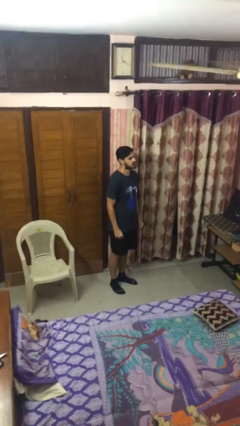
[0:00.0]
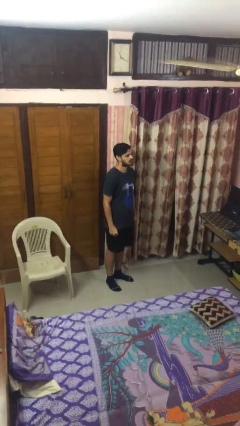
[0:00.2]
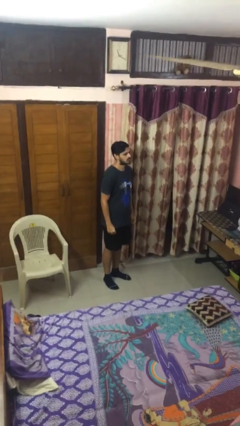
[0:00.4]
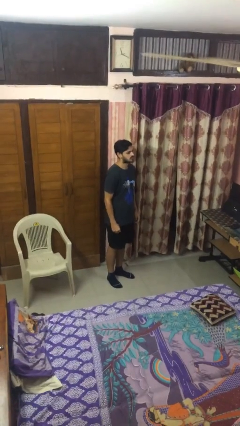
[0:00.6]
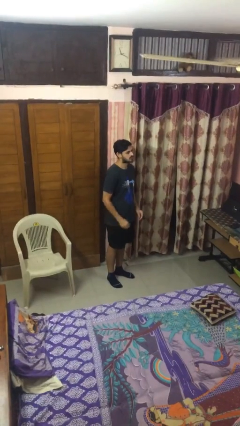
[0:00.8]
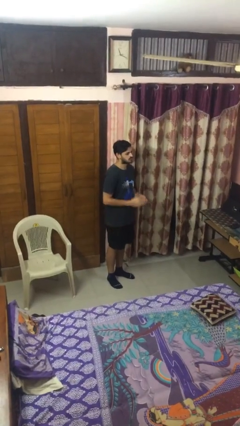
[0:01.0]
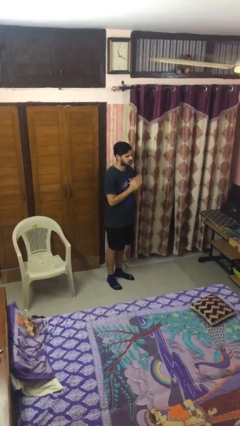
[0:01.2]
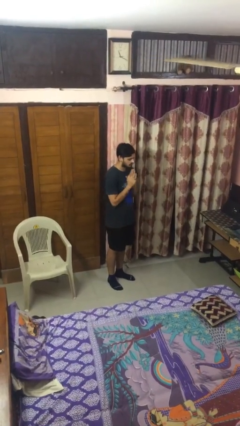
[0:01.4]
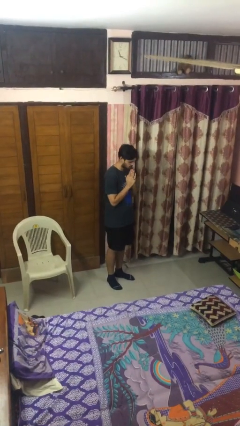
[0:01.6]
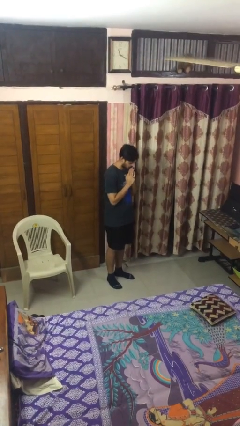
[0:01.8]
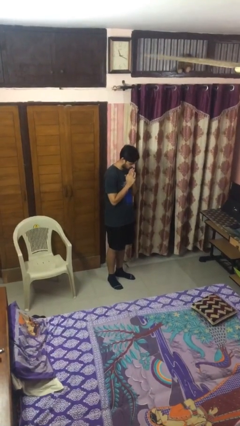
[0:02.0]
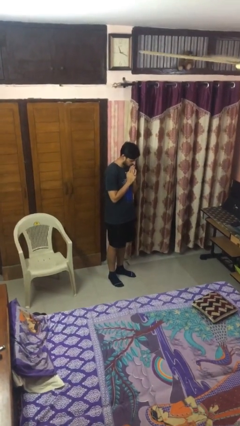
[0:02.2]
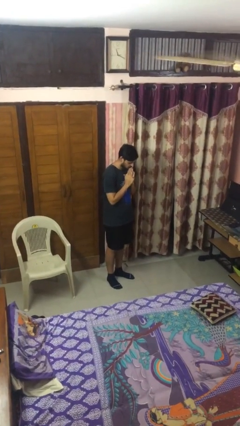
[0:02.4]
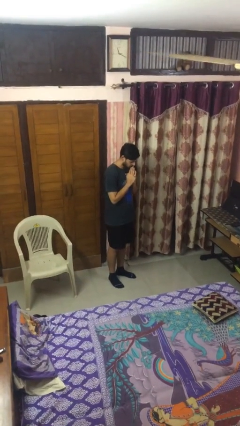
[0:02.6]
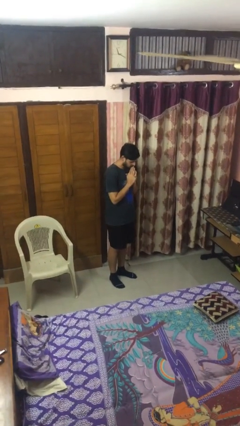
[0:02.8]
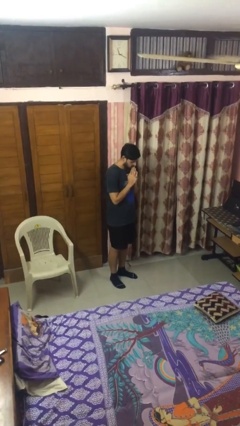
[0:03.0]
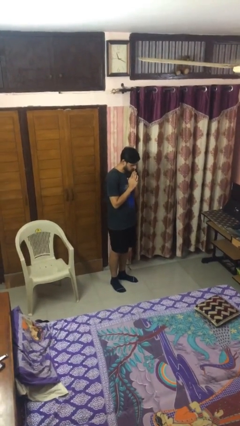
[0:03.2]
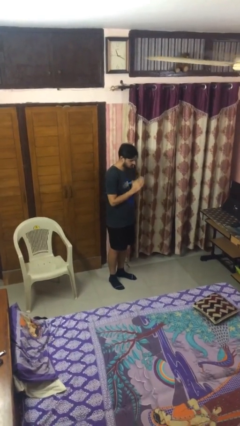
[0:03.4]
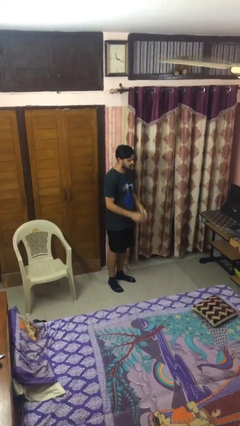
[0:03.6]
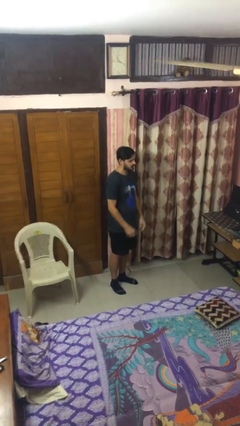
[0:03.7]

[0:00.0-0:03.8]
person prays

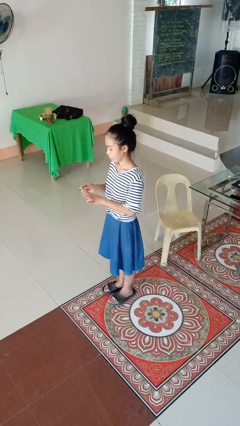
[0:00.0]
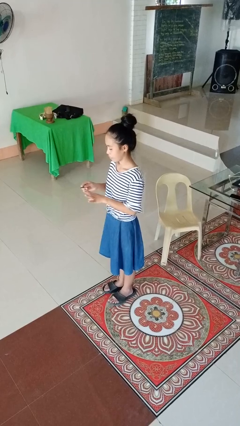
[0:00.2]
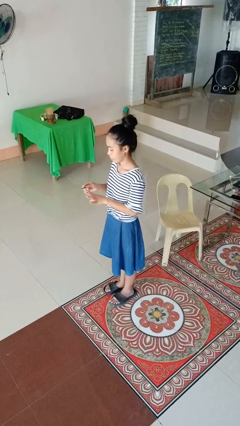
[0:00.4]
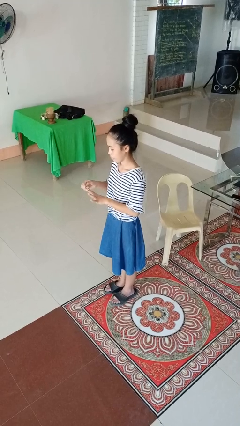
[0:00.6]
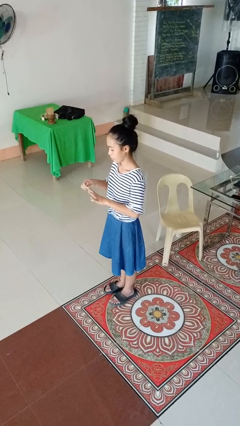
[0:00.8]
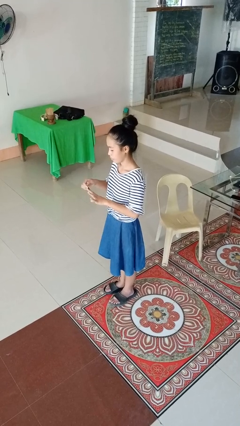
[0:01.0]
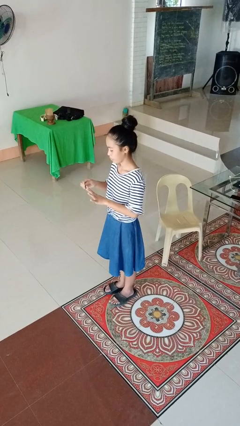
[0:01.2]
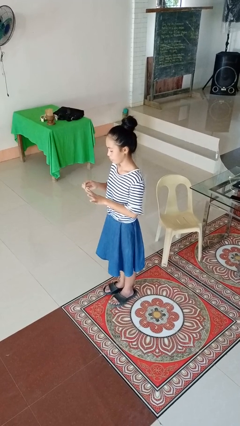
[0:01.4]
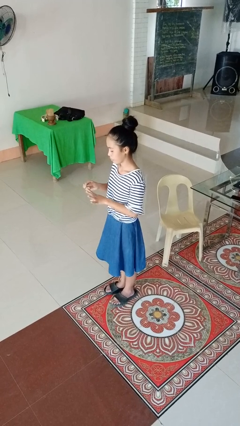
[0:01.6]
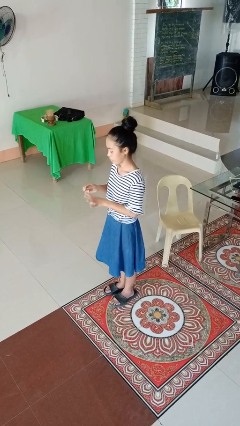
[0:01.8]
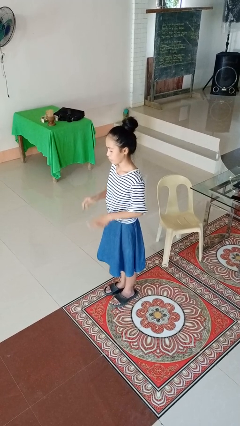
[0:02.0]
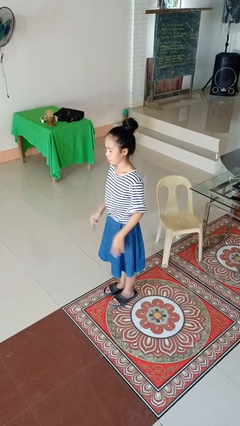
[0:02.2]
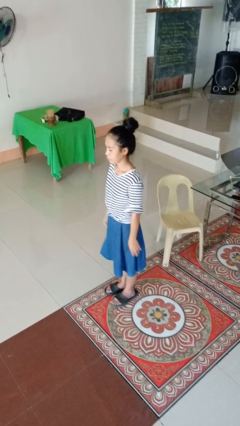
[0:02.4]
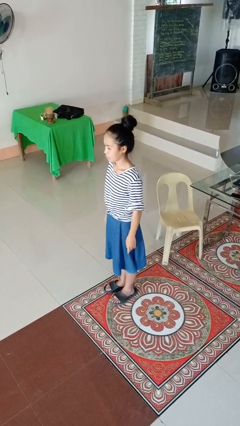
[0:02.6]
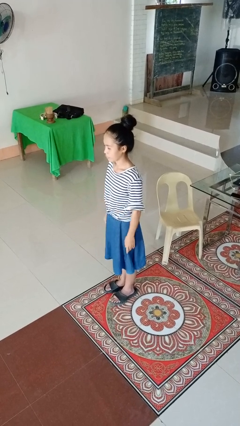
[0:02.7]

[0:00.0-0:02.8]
person files fingernails

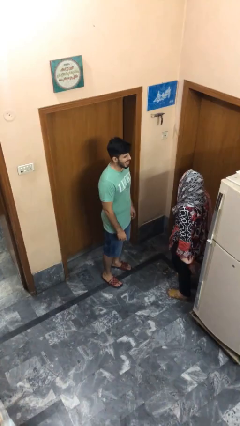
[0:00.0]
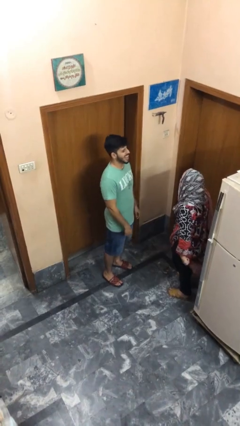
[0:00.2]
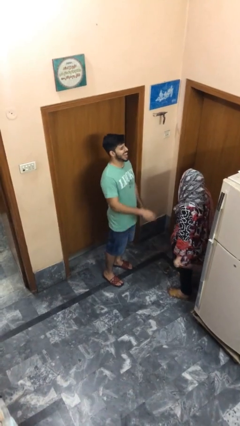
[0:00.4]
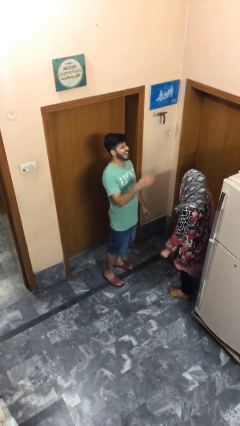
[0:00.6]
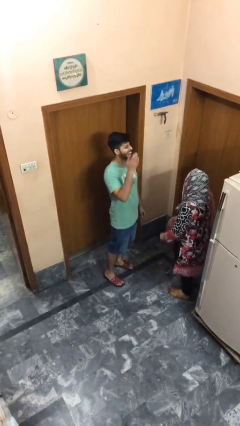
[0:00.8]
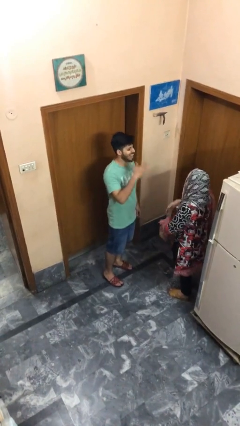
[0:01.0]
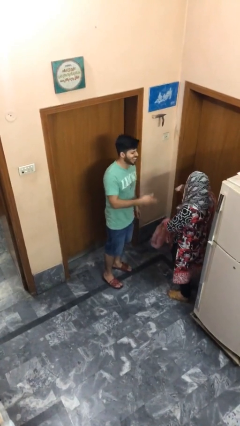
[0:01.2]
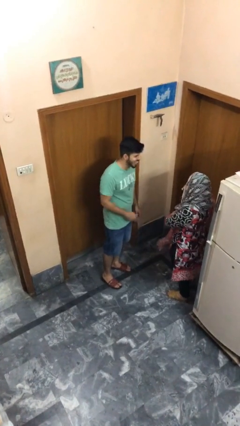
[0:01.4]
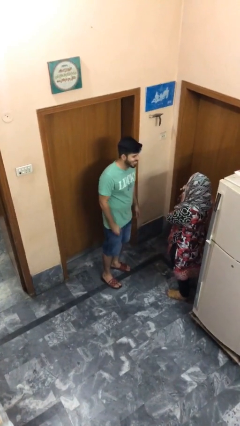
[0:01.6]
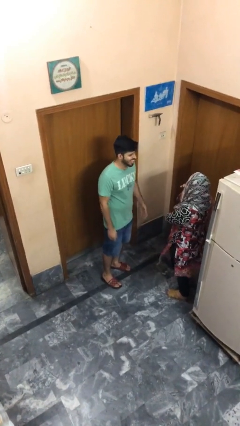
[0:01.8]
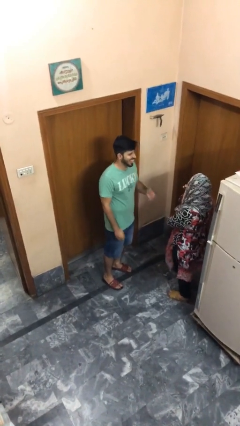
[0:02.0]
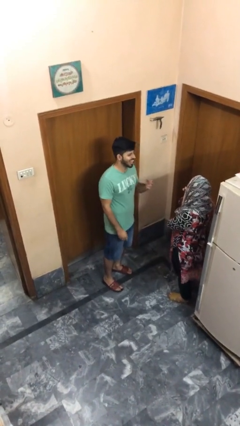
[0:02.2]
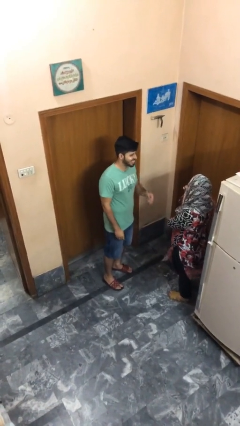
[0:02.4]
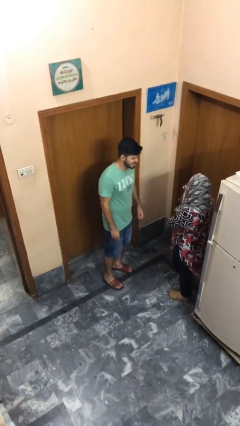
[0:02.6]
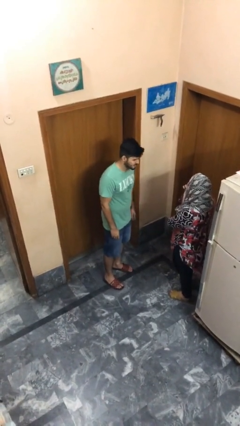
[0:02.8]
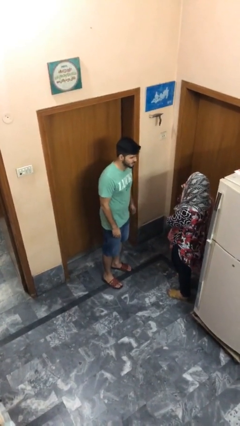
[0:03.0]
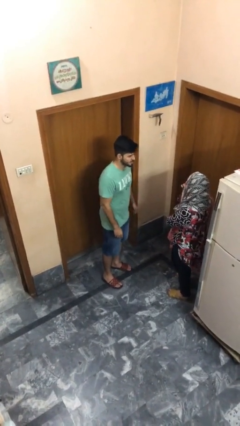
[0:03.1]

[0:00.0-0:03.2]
person laughs with person

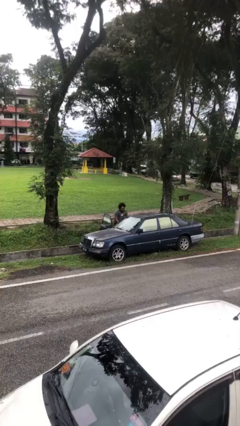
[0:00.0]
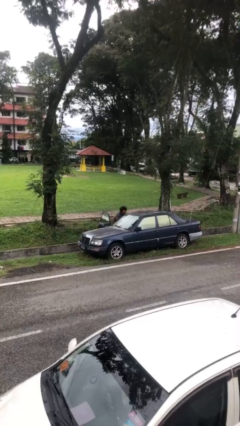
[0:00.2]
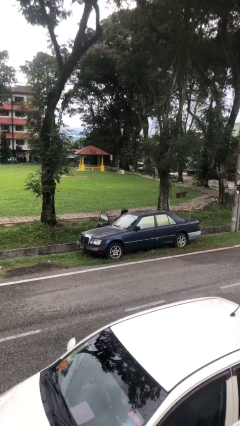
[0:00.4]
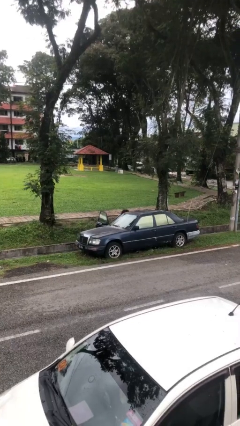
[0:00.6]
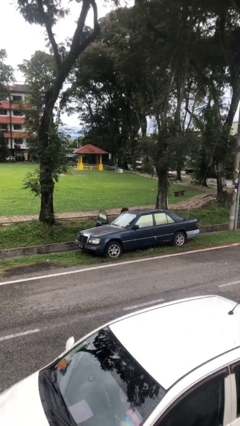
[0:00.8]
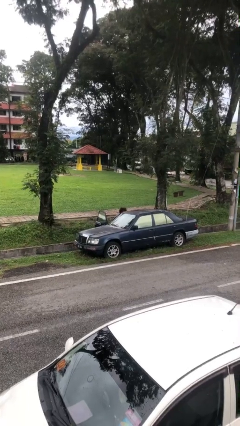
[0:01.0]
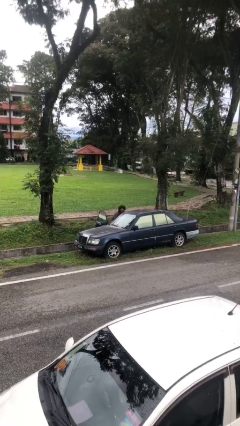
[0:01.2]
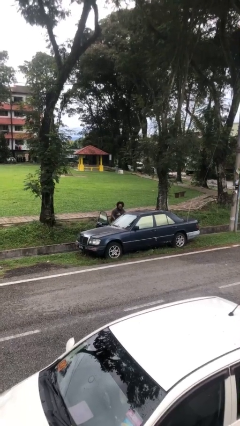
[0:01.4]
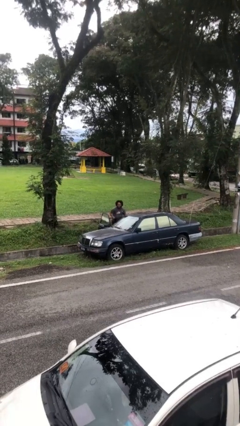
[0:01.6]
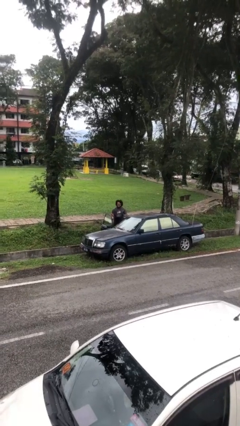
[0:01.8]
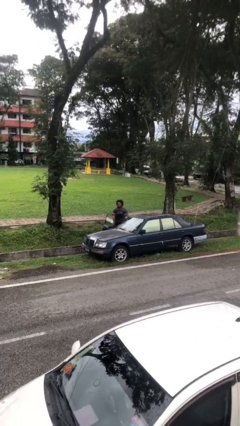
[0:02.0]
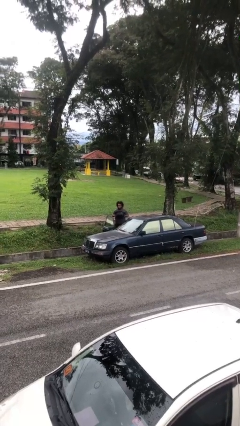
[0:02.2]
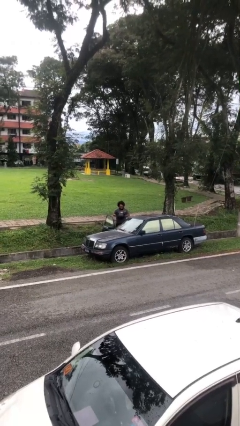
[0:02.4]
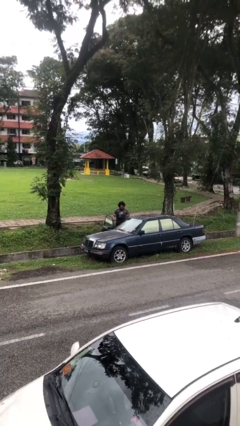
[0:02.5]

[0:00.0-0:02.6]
person unloads car

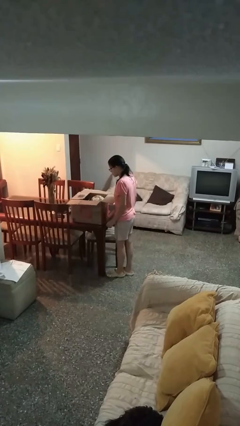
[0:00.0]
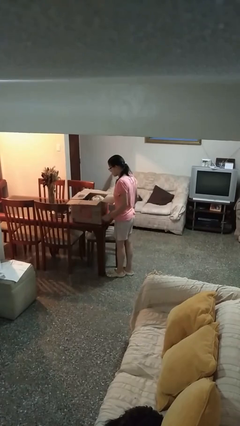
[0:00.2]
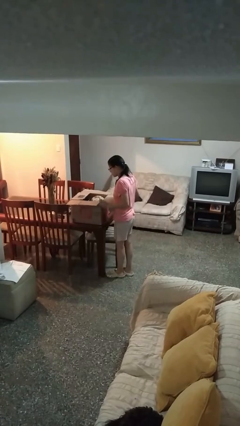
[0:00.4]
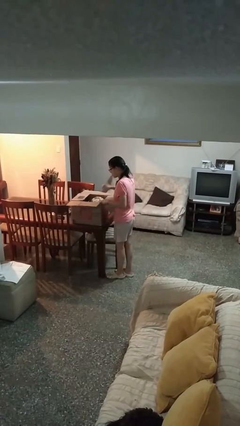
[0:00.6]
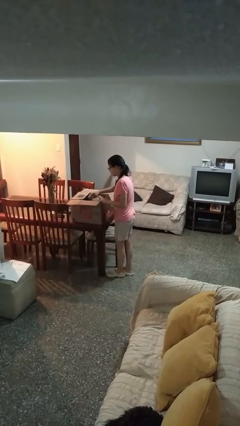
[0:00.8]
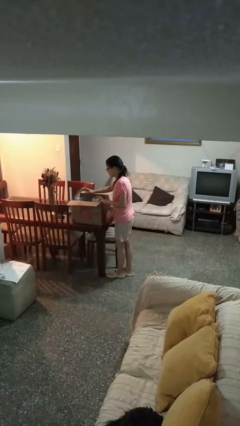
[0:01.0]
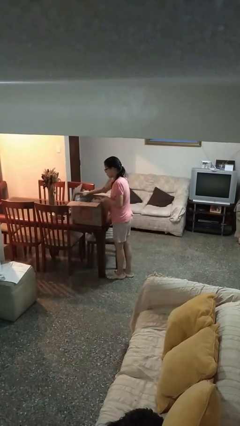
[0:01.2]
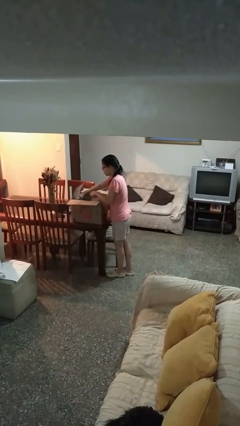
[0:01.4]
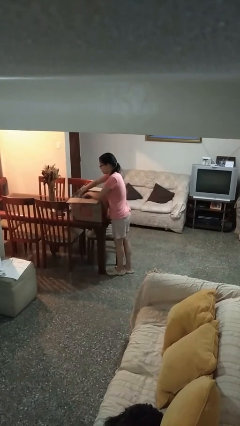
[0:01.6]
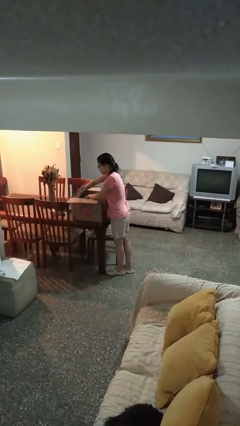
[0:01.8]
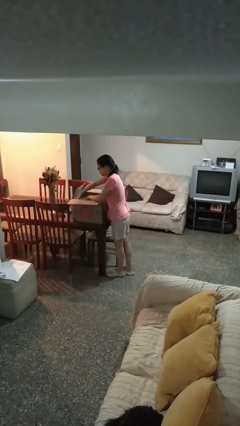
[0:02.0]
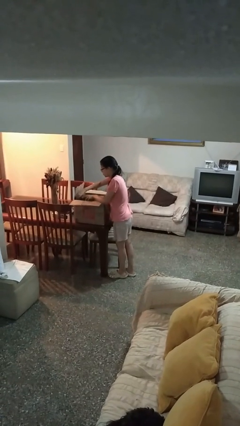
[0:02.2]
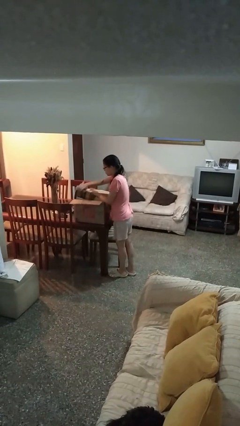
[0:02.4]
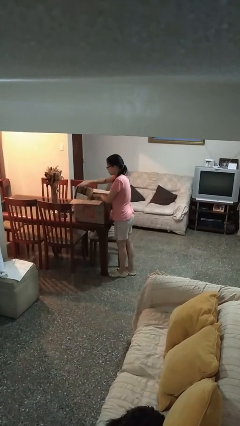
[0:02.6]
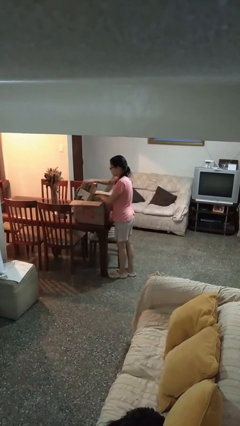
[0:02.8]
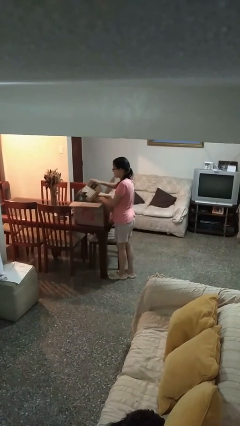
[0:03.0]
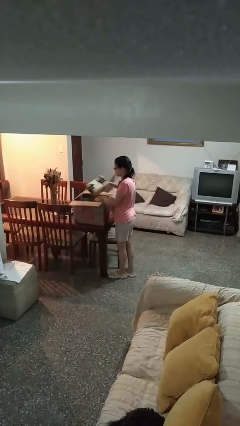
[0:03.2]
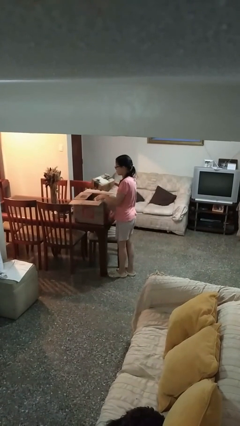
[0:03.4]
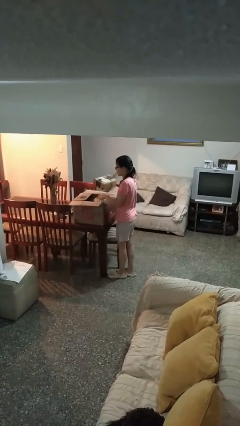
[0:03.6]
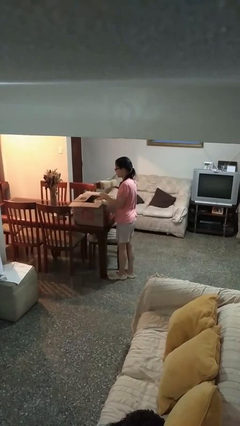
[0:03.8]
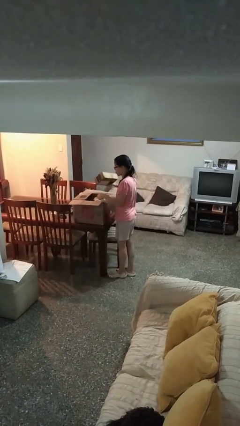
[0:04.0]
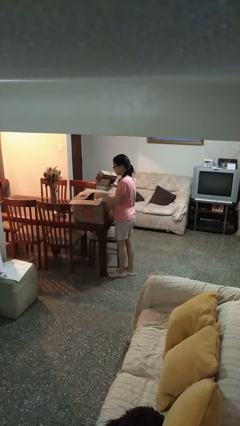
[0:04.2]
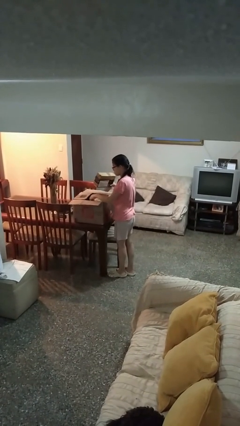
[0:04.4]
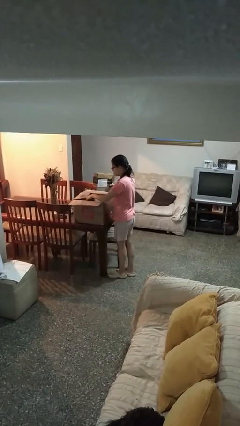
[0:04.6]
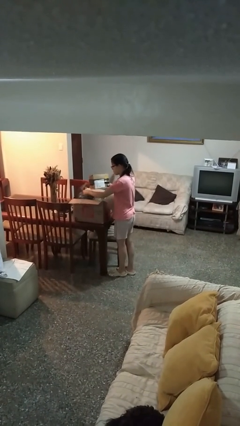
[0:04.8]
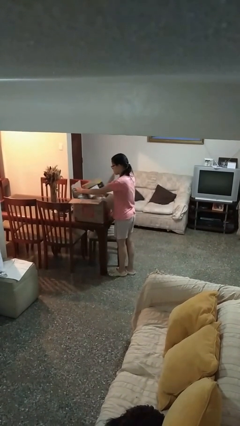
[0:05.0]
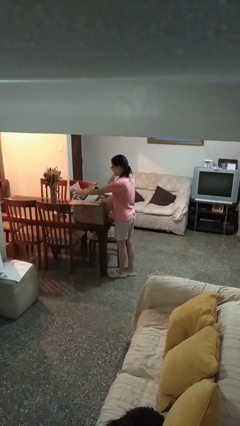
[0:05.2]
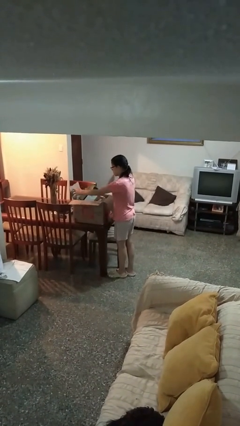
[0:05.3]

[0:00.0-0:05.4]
person searches in box
